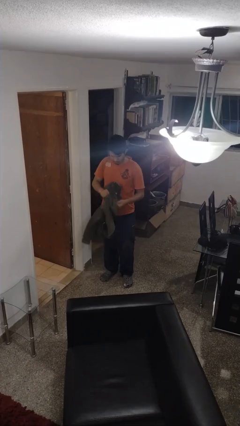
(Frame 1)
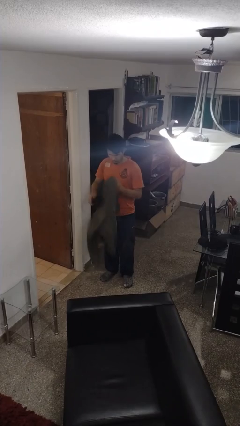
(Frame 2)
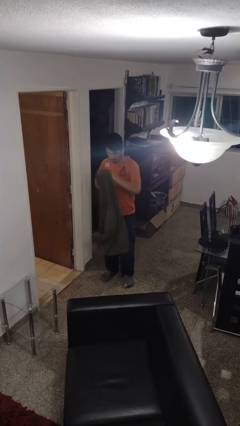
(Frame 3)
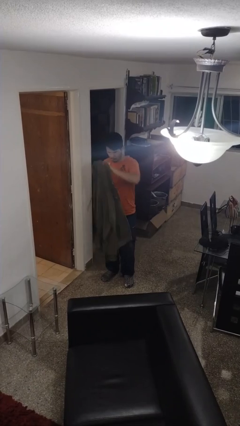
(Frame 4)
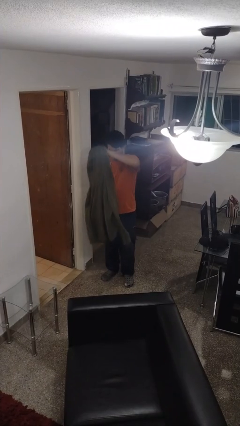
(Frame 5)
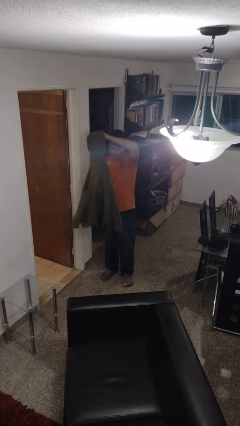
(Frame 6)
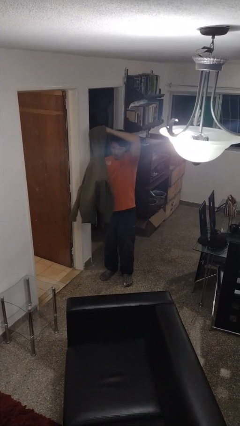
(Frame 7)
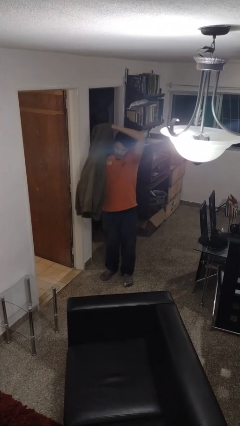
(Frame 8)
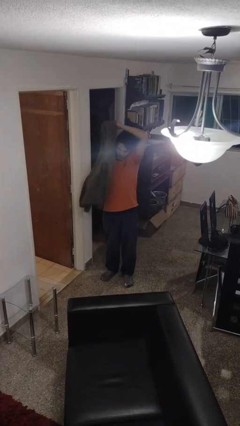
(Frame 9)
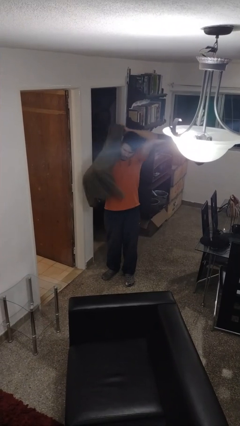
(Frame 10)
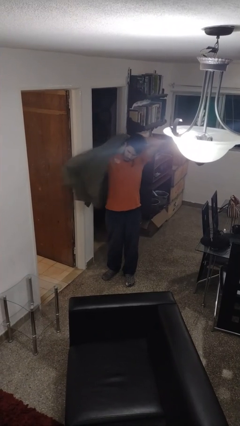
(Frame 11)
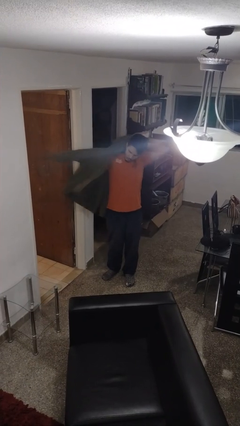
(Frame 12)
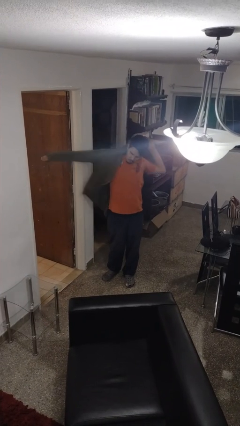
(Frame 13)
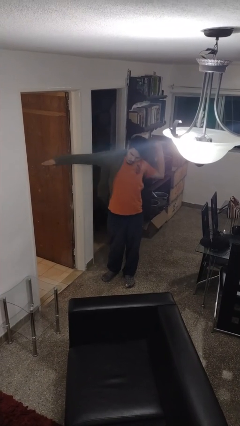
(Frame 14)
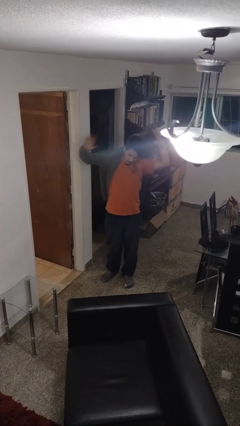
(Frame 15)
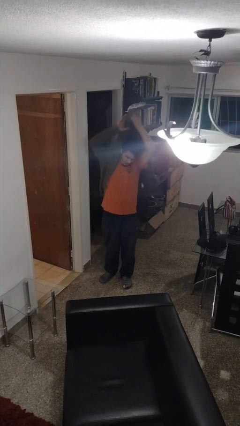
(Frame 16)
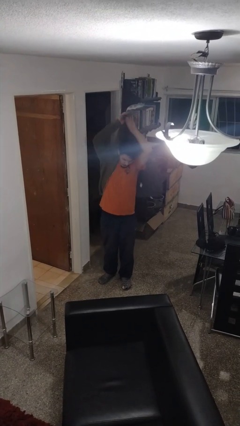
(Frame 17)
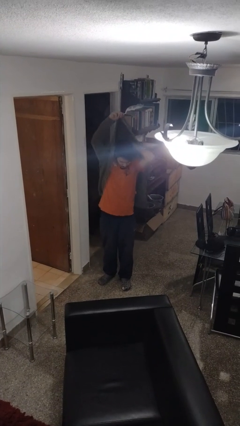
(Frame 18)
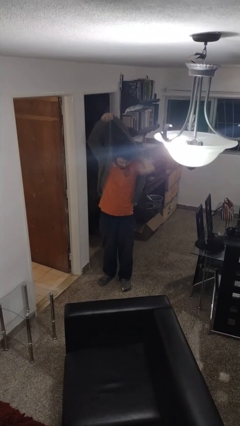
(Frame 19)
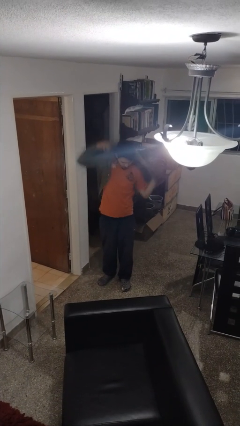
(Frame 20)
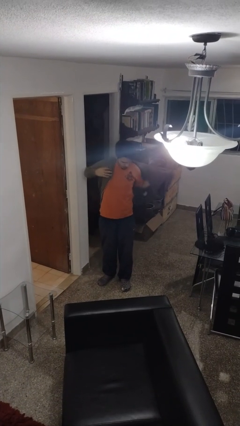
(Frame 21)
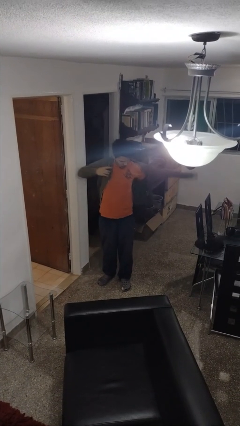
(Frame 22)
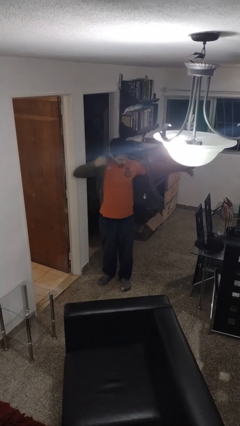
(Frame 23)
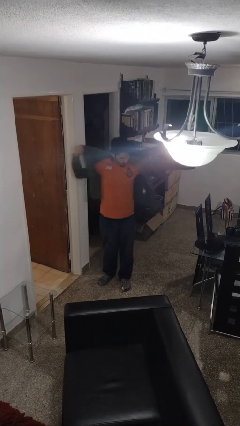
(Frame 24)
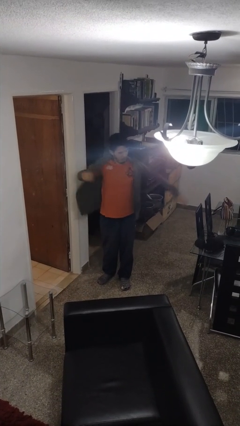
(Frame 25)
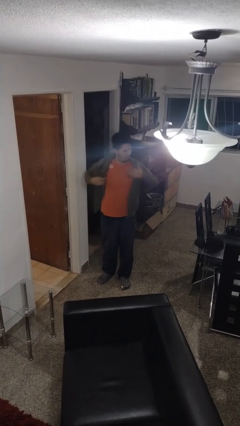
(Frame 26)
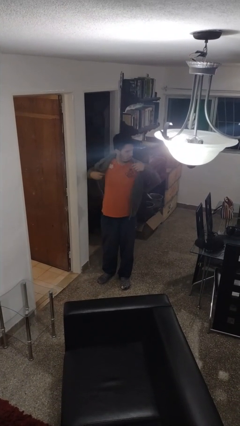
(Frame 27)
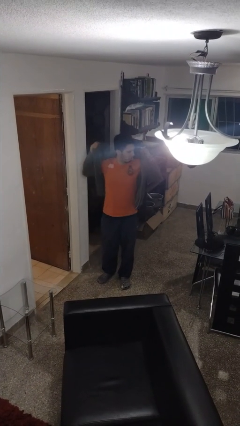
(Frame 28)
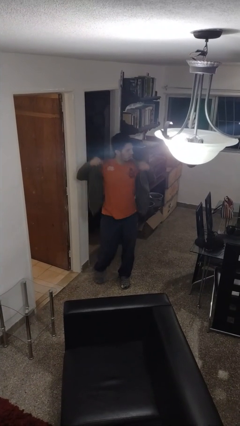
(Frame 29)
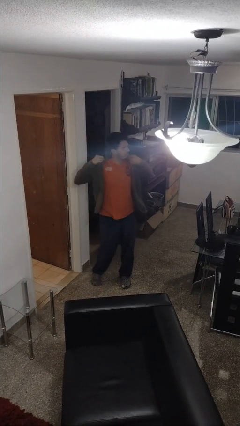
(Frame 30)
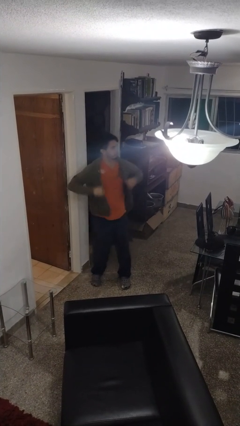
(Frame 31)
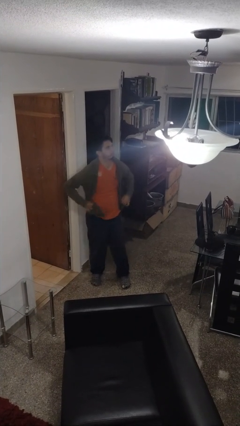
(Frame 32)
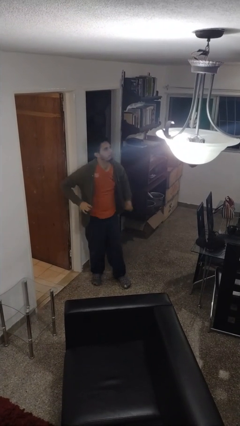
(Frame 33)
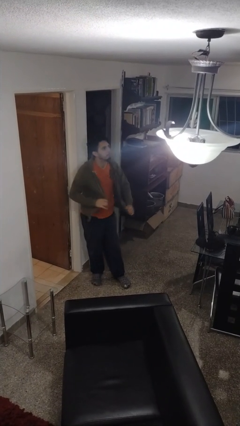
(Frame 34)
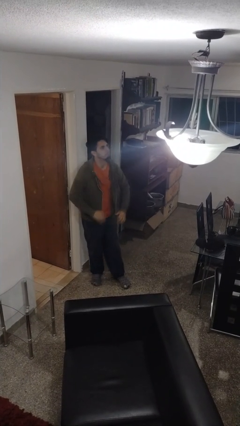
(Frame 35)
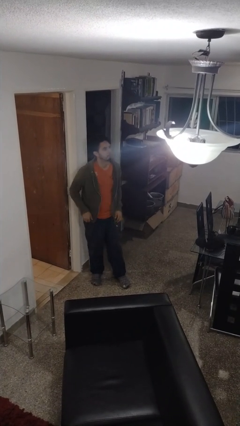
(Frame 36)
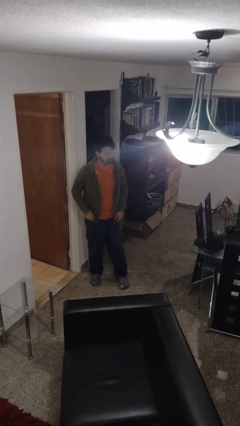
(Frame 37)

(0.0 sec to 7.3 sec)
person puts on jacket

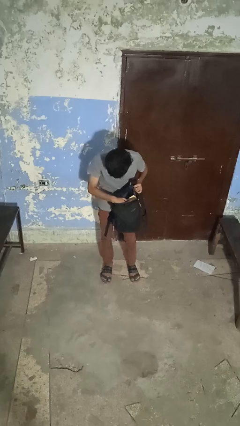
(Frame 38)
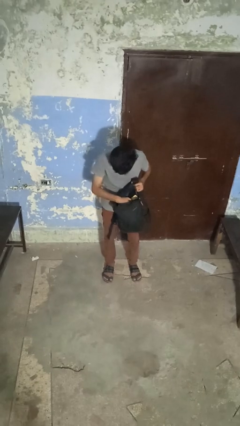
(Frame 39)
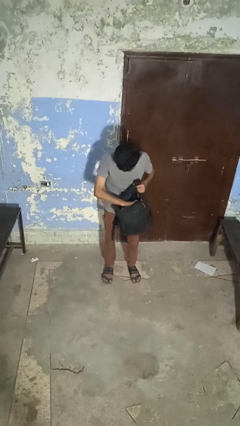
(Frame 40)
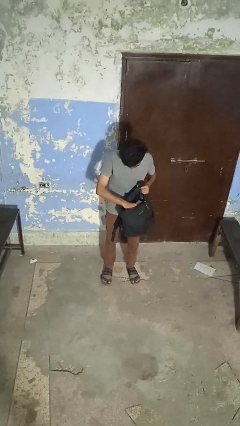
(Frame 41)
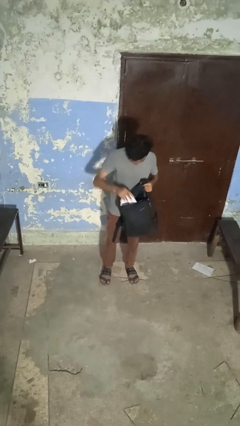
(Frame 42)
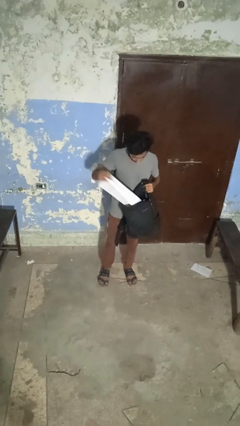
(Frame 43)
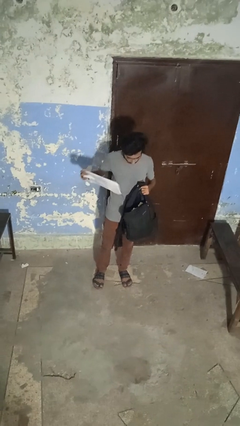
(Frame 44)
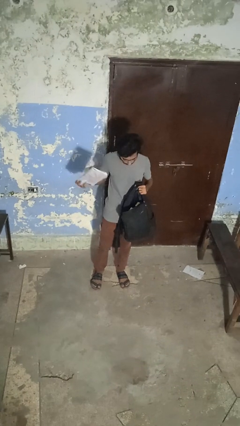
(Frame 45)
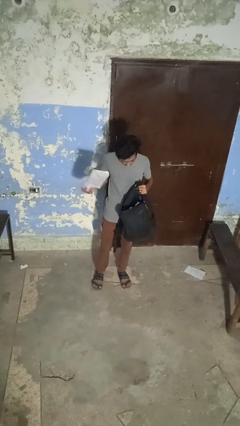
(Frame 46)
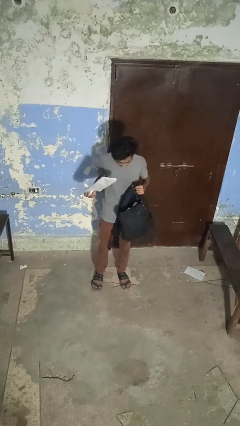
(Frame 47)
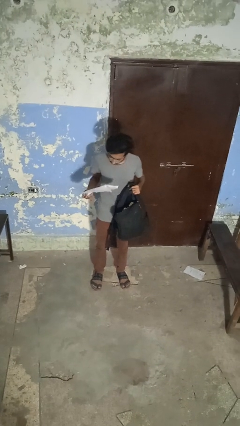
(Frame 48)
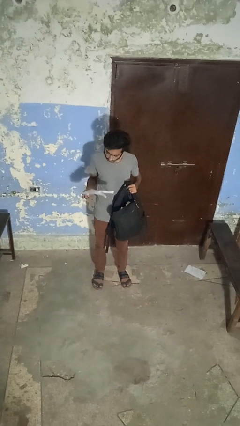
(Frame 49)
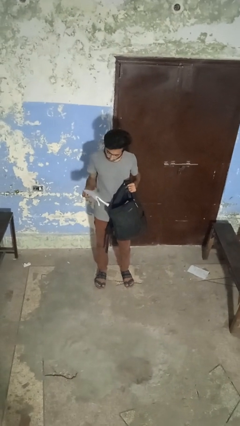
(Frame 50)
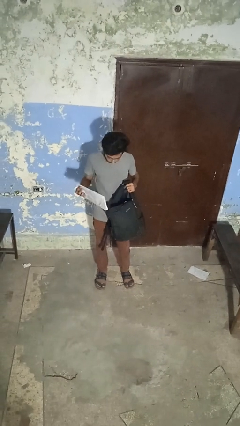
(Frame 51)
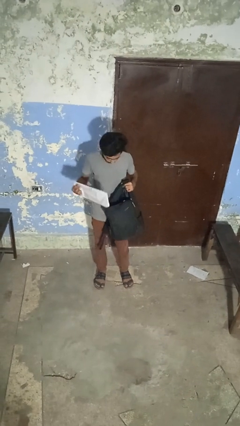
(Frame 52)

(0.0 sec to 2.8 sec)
person takes object from backpack

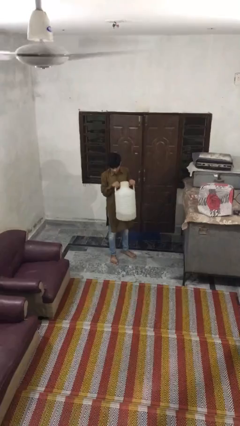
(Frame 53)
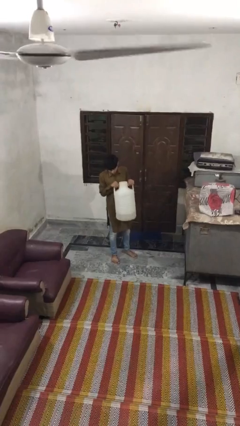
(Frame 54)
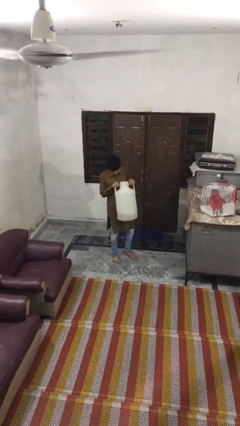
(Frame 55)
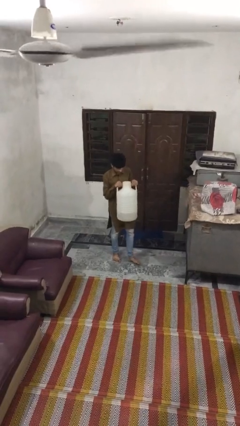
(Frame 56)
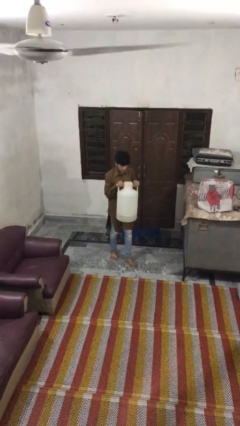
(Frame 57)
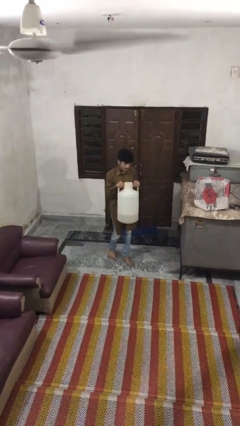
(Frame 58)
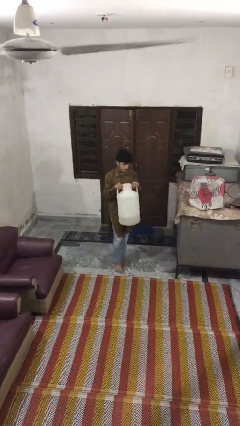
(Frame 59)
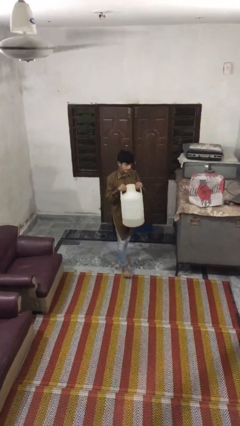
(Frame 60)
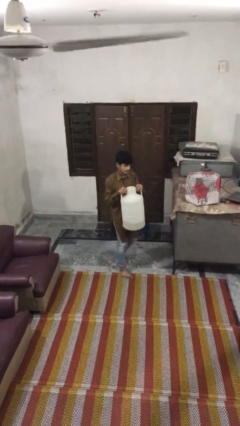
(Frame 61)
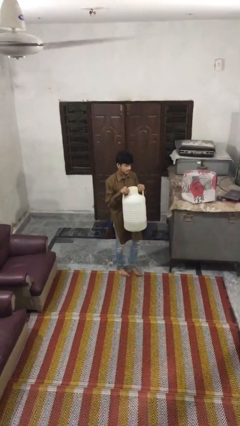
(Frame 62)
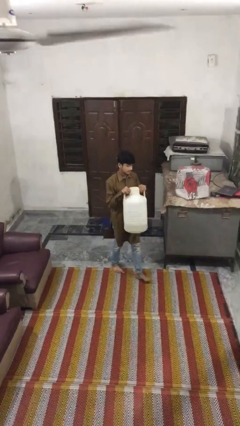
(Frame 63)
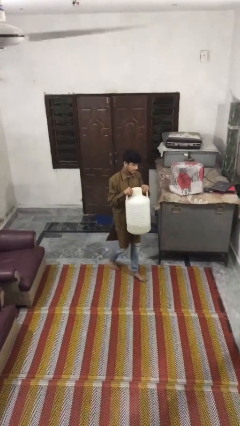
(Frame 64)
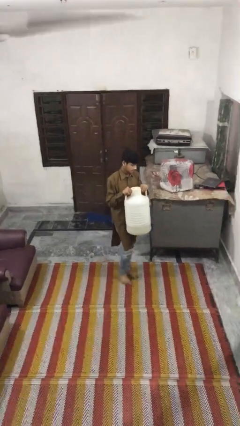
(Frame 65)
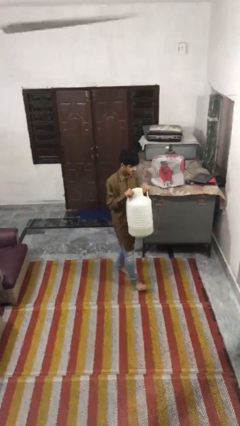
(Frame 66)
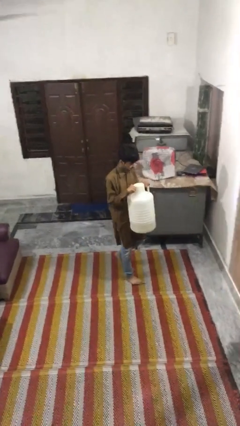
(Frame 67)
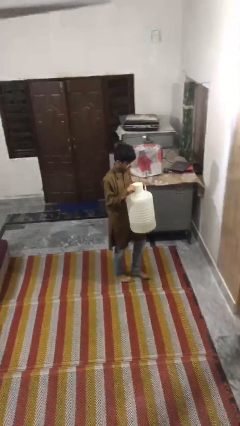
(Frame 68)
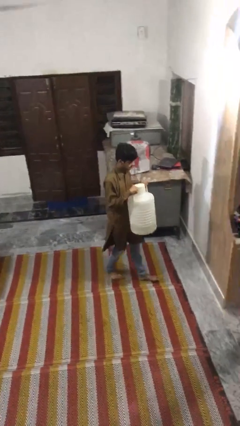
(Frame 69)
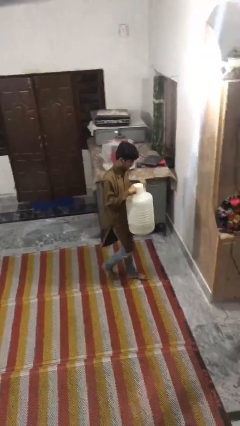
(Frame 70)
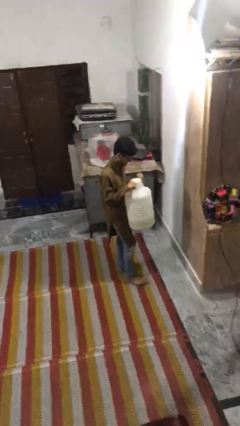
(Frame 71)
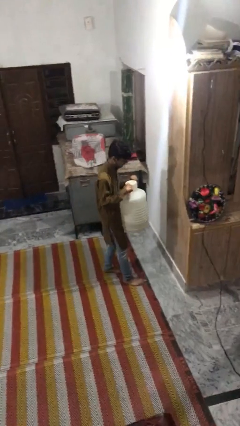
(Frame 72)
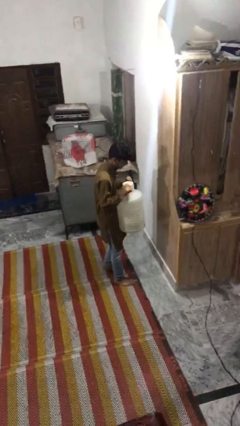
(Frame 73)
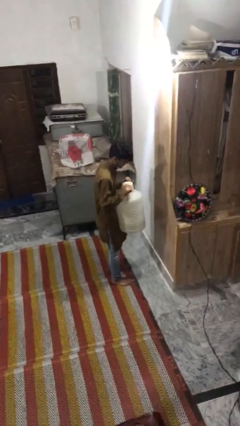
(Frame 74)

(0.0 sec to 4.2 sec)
person carries heavy object

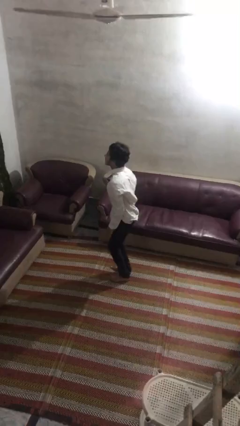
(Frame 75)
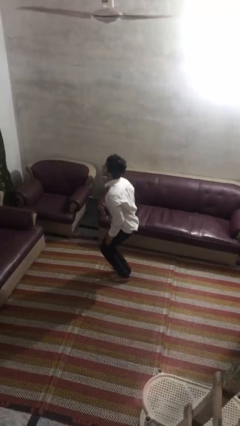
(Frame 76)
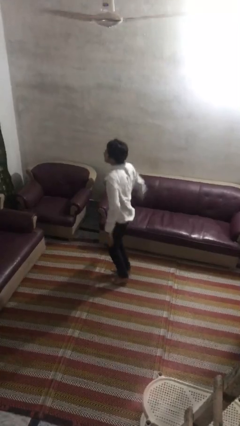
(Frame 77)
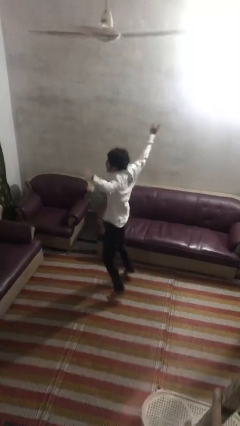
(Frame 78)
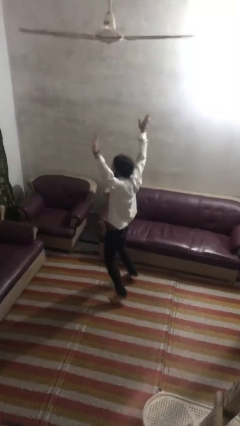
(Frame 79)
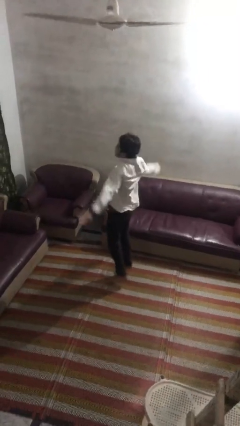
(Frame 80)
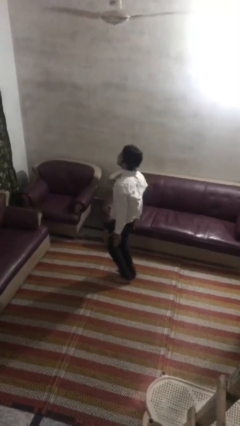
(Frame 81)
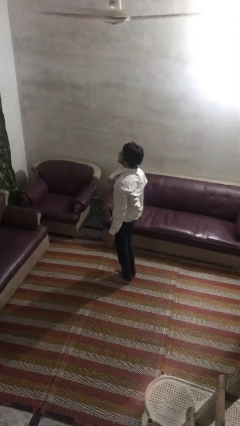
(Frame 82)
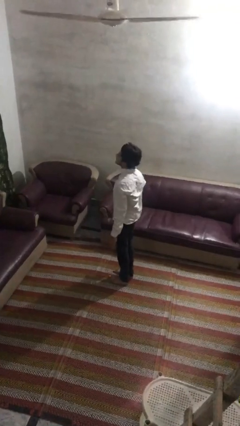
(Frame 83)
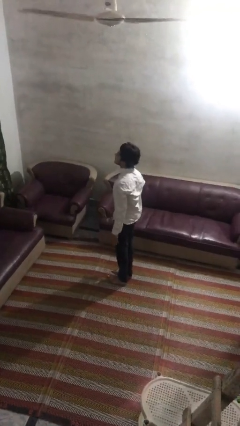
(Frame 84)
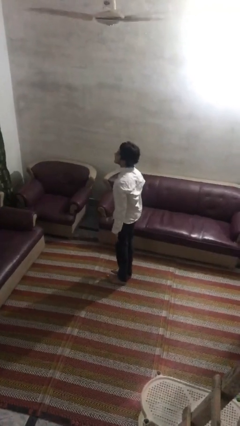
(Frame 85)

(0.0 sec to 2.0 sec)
person exercises with jumping jacks

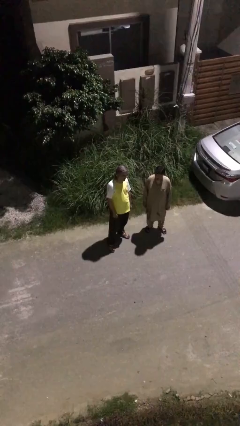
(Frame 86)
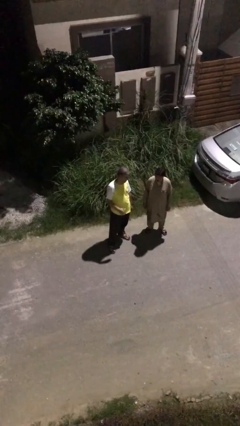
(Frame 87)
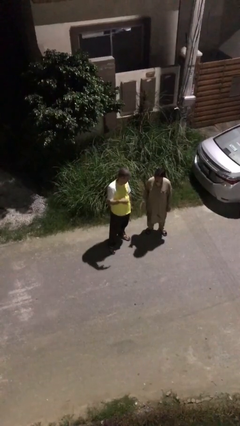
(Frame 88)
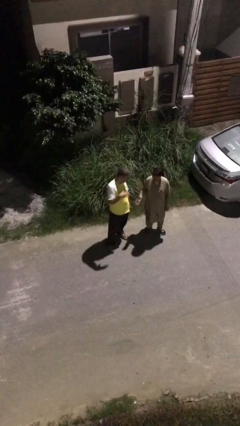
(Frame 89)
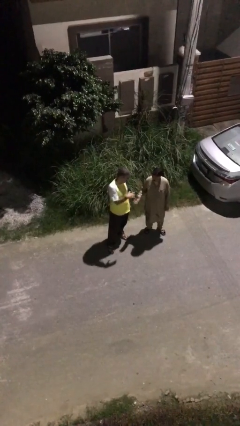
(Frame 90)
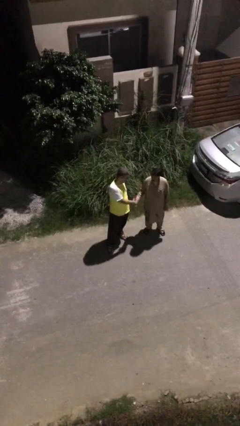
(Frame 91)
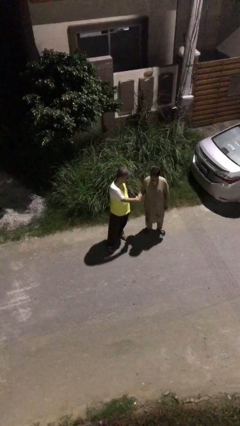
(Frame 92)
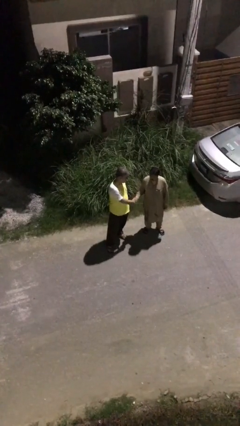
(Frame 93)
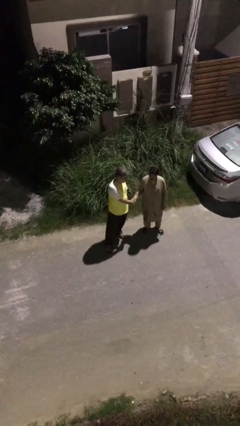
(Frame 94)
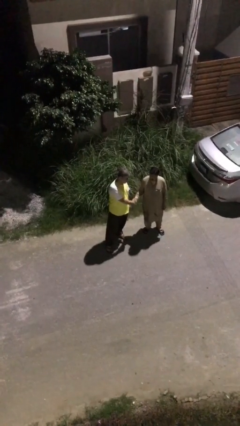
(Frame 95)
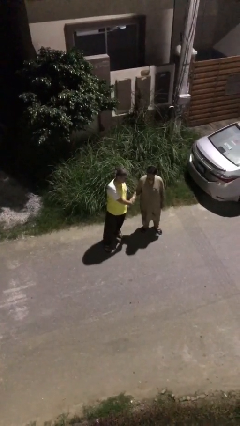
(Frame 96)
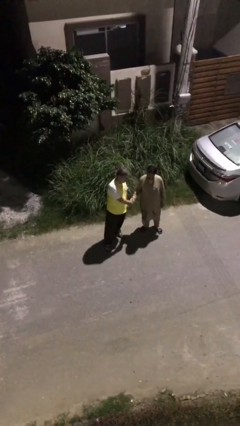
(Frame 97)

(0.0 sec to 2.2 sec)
person shakes hand
